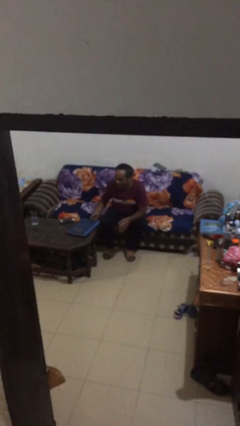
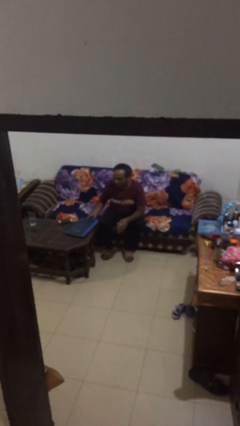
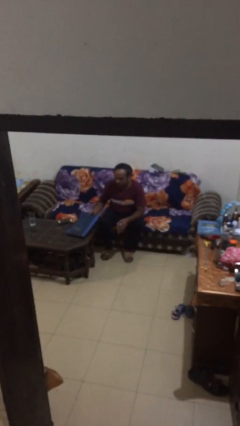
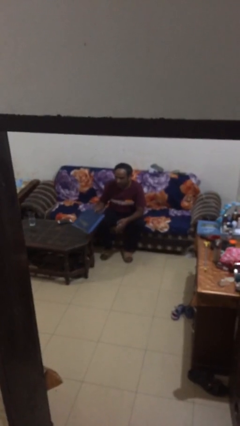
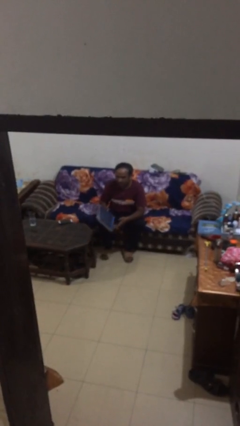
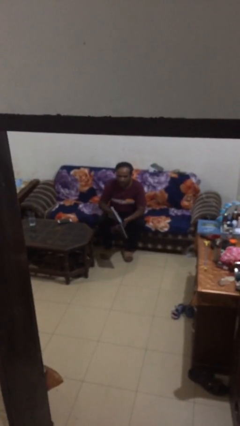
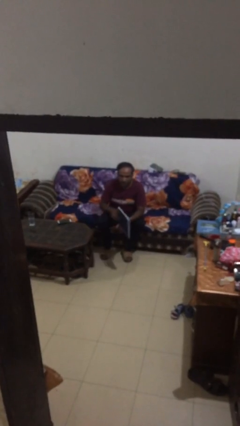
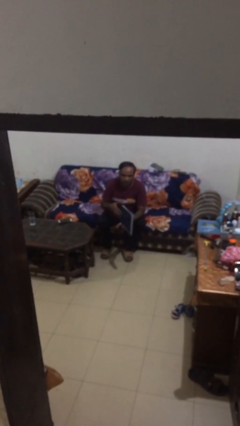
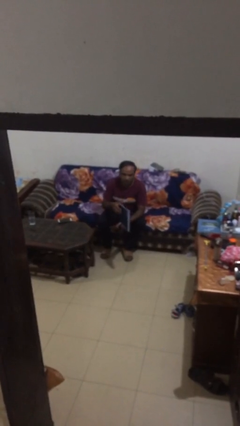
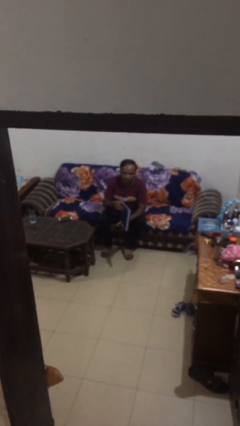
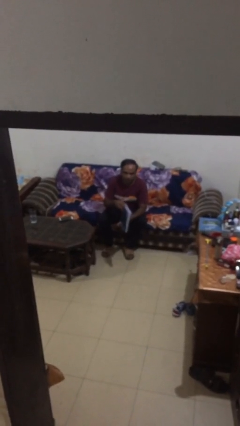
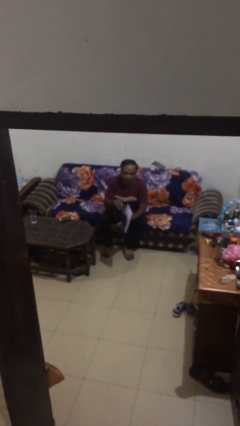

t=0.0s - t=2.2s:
person picks up object from table

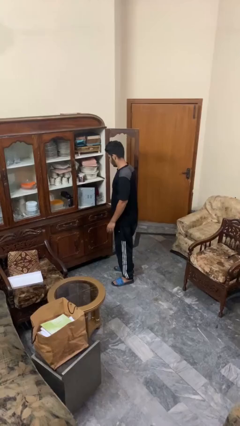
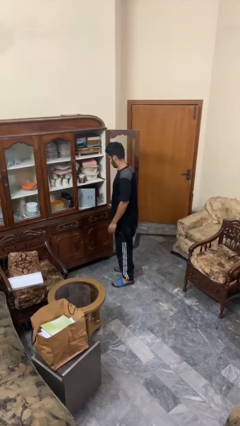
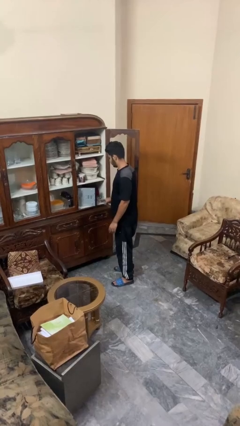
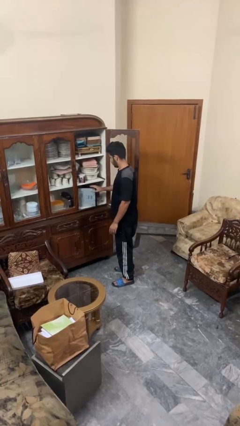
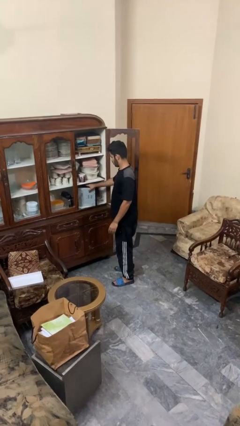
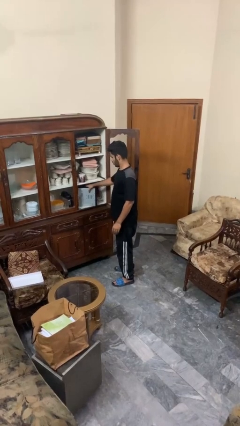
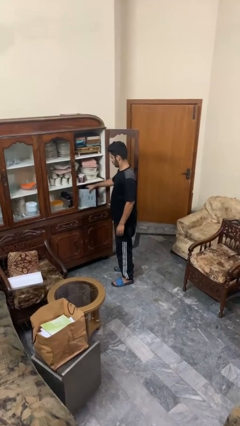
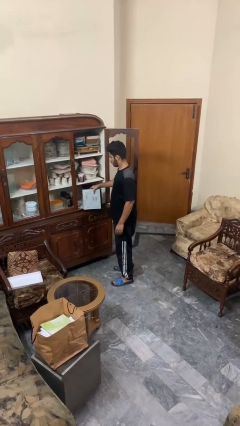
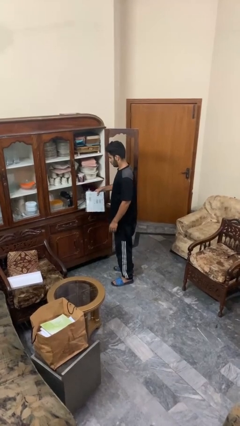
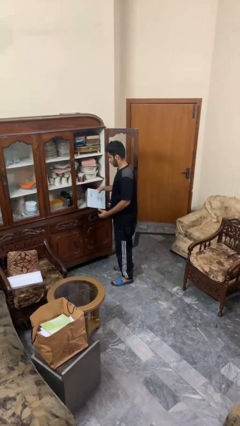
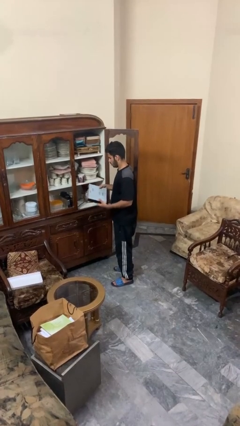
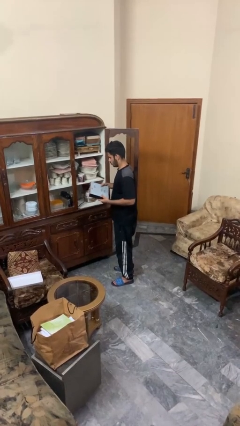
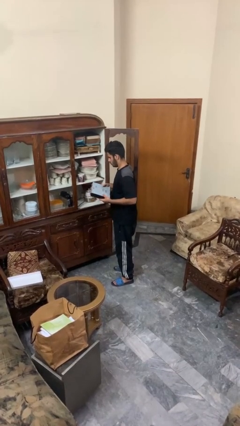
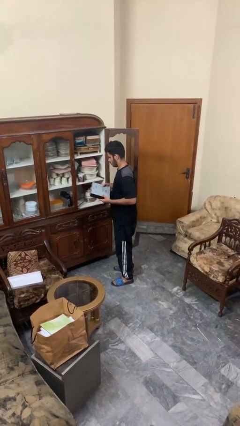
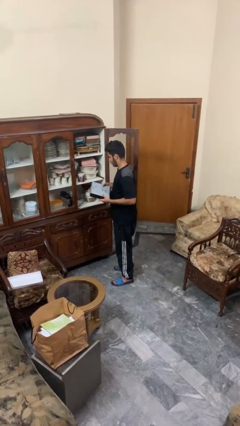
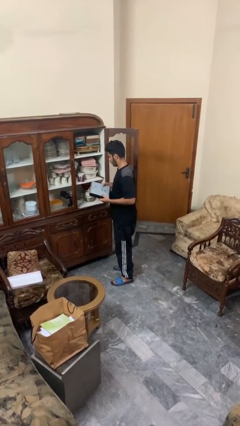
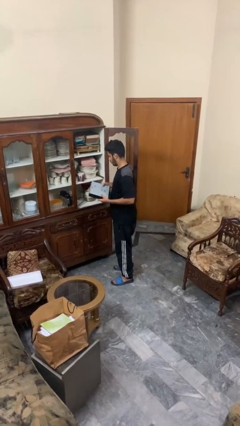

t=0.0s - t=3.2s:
person picks up object from cabinet

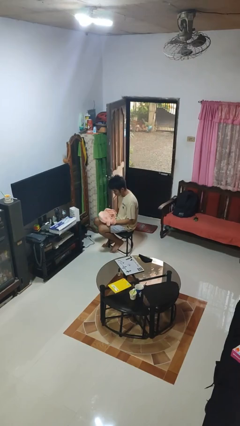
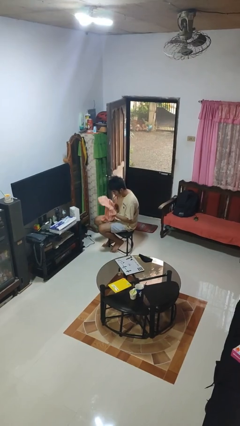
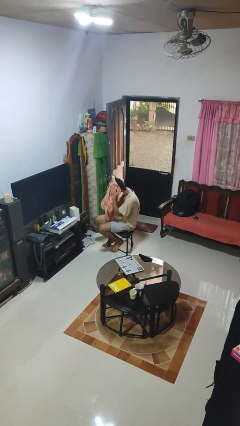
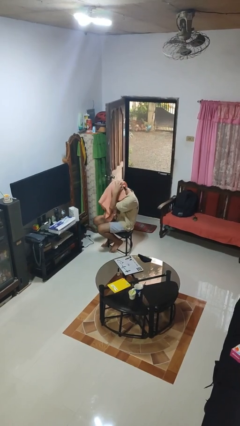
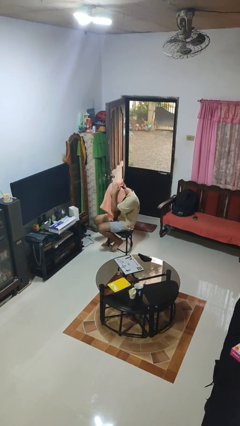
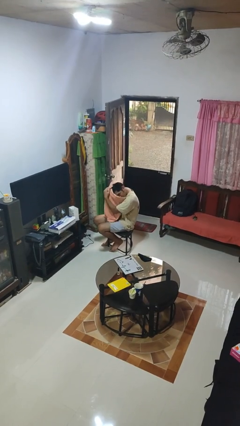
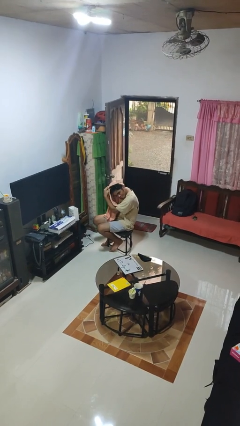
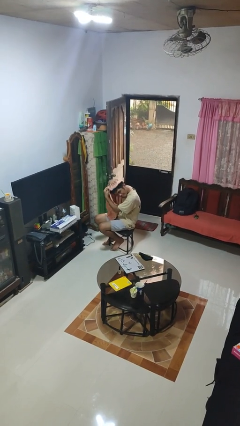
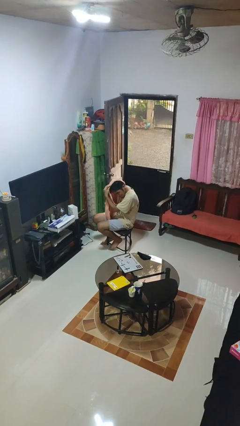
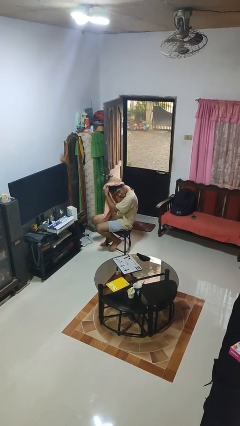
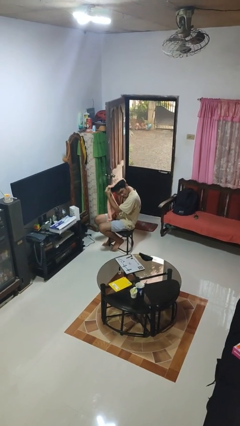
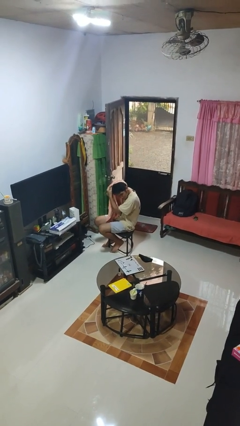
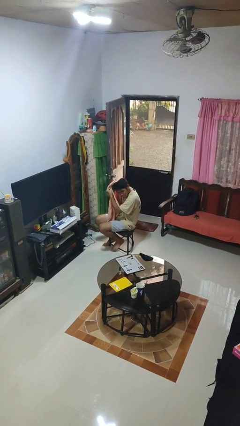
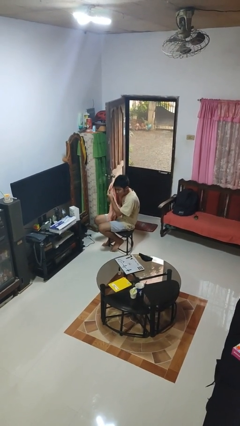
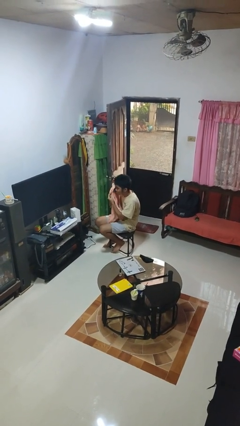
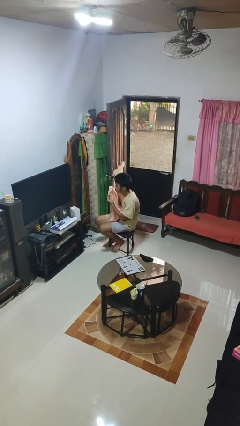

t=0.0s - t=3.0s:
person dries hair with towel

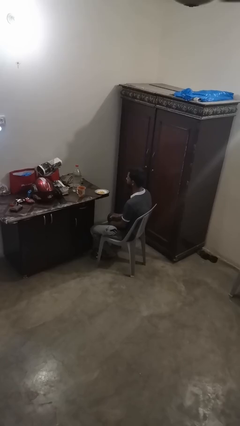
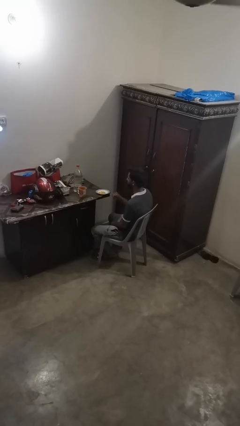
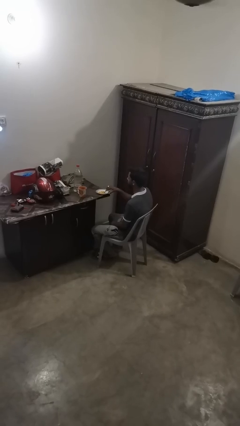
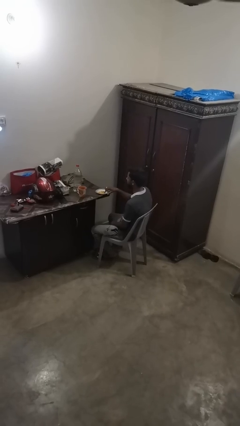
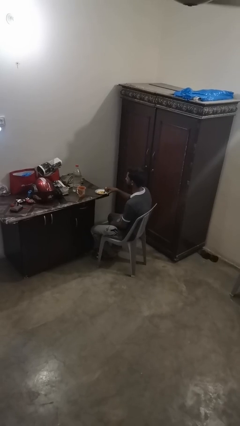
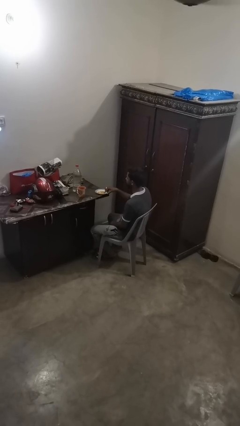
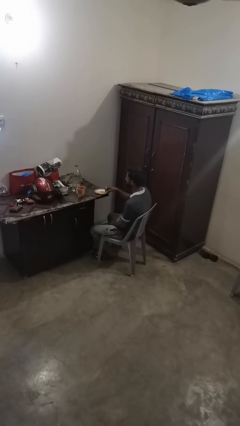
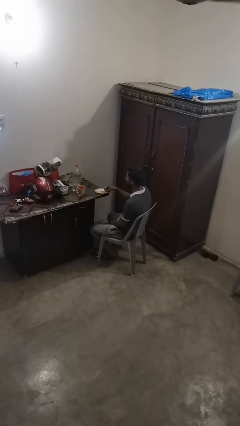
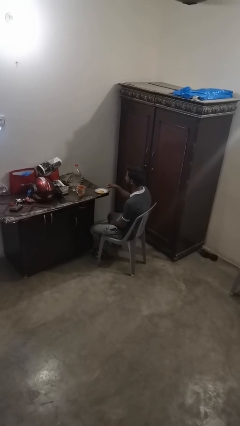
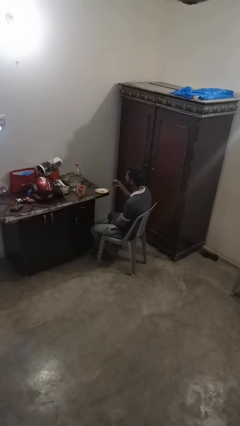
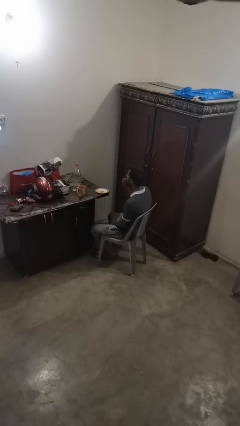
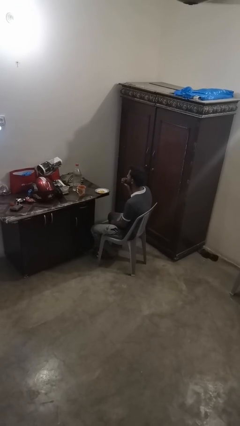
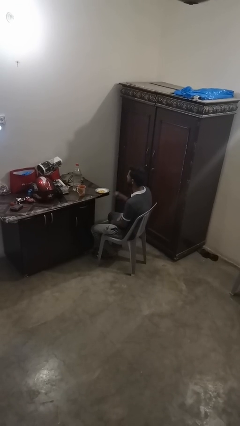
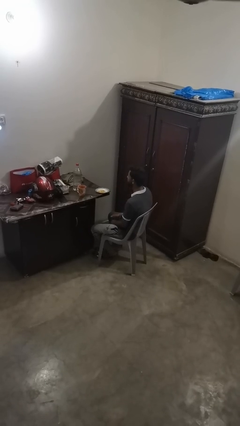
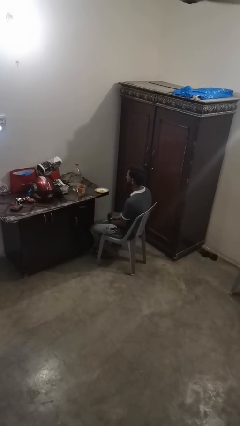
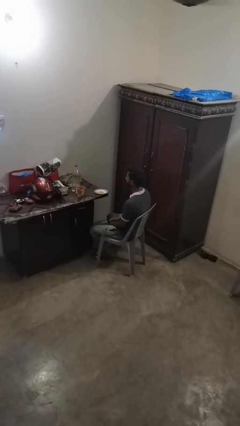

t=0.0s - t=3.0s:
person eats with hands

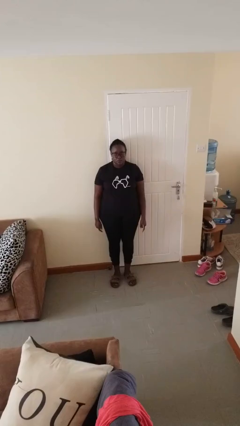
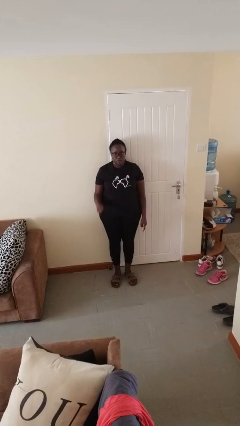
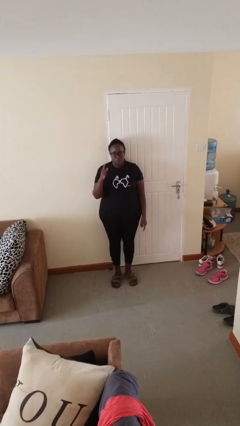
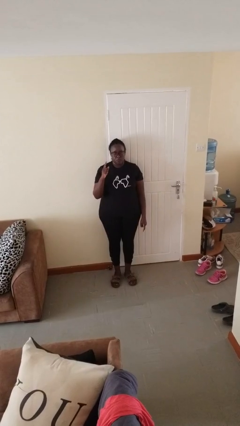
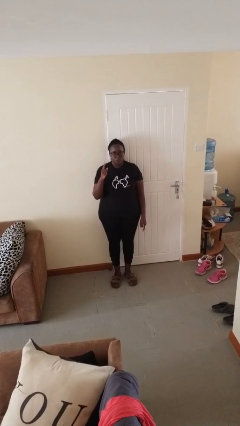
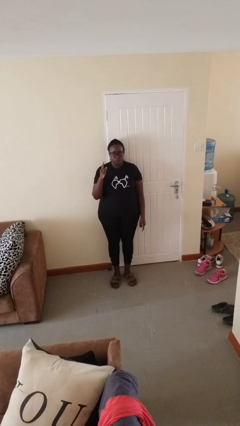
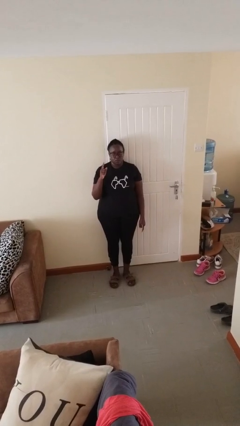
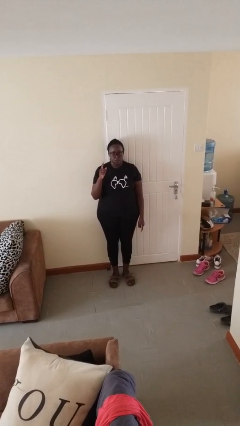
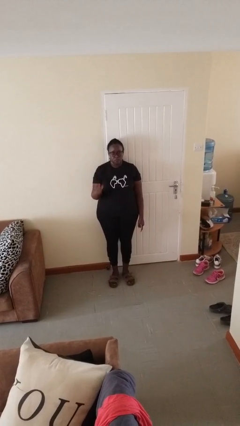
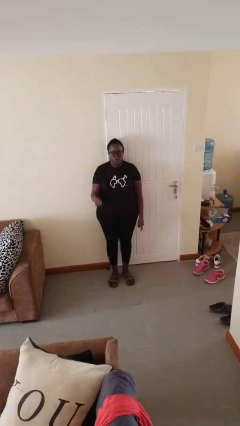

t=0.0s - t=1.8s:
person gestures number one

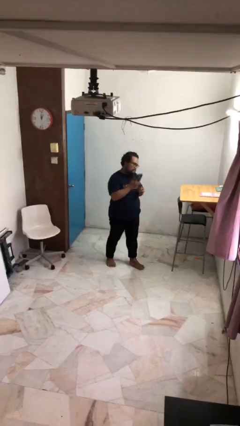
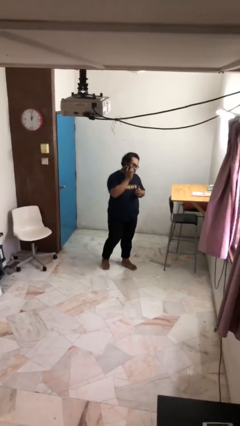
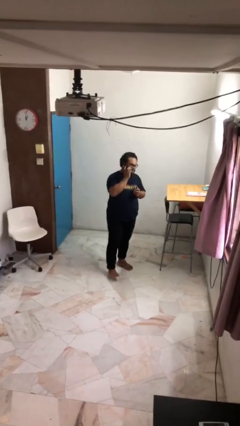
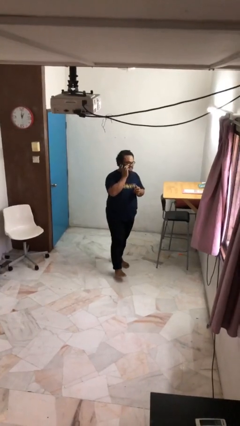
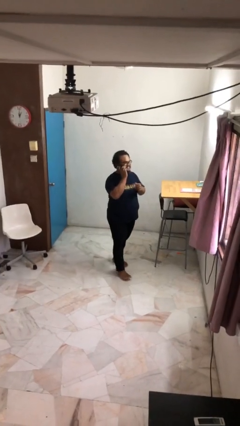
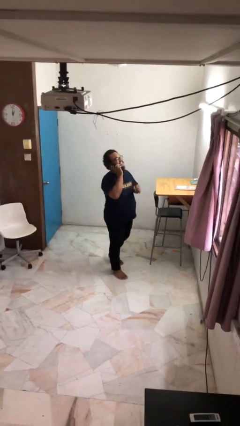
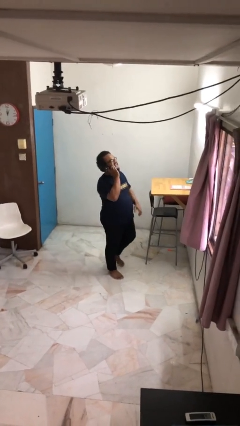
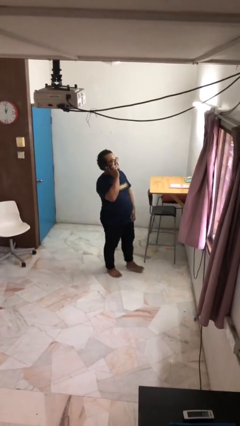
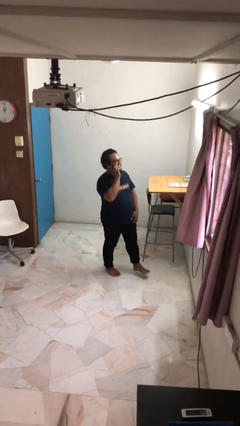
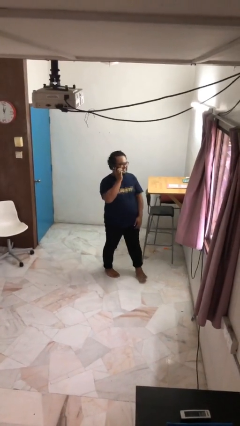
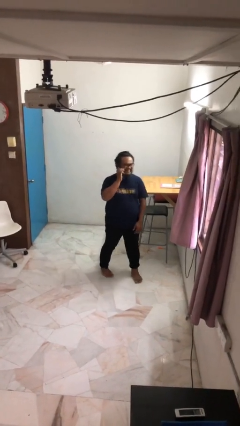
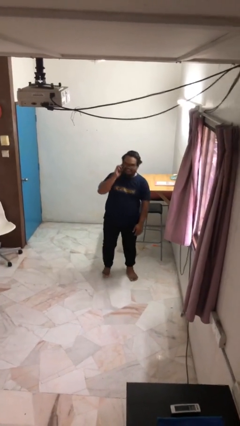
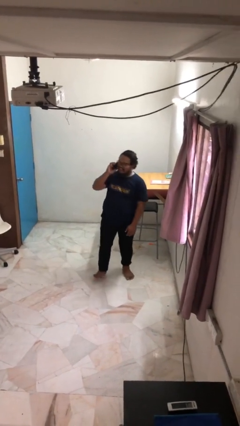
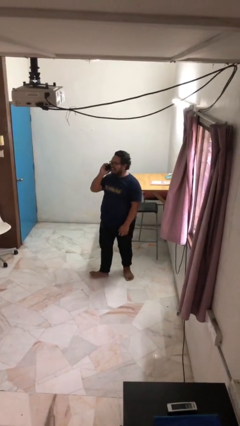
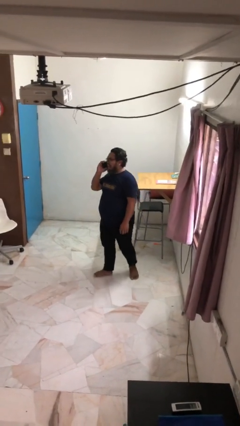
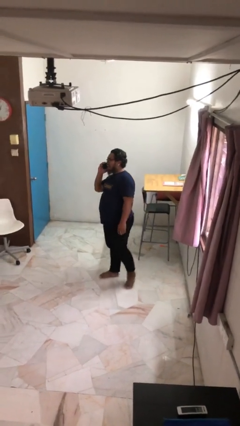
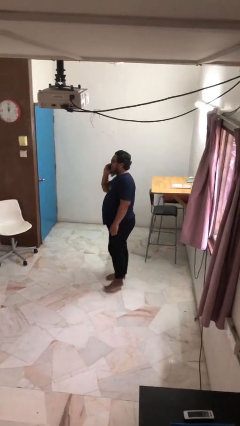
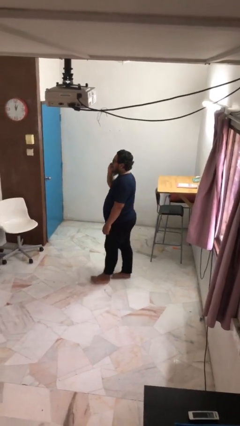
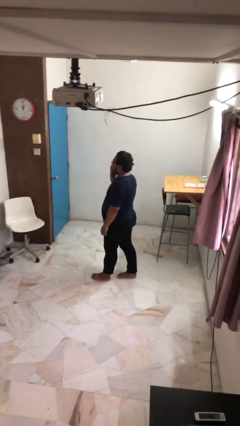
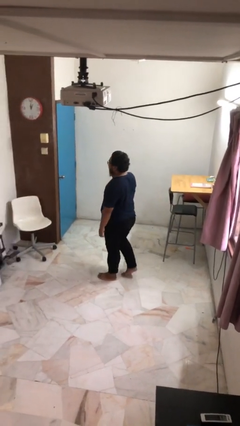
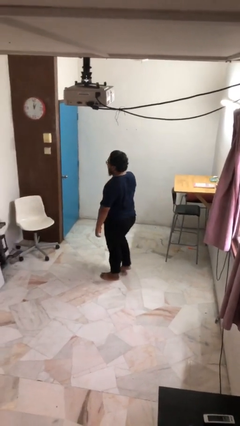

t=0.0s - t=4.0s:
person talks on phone
